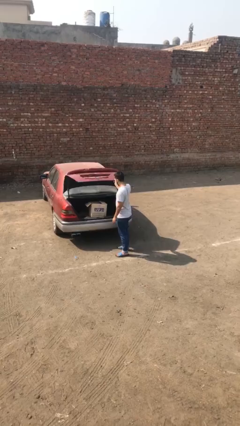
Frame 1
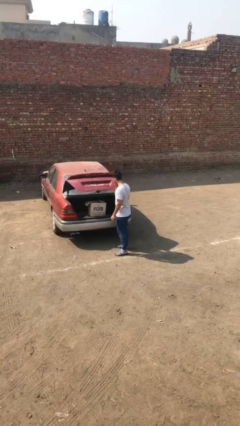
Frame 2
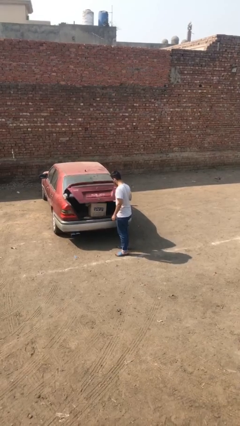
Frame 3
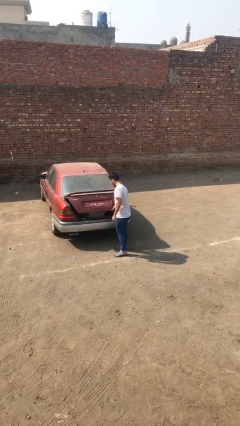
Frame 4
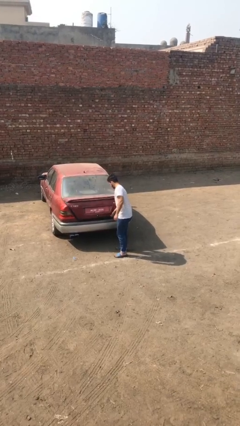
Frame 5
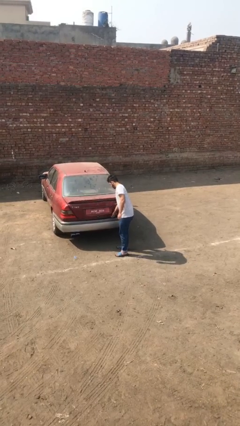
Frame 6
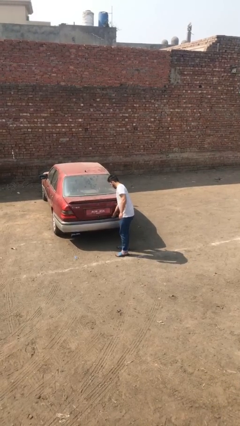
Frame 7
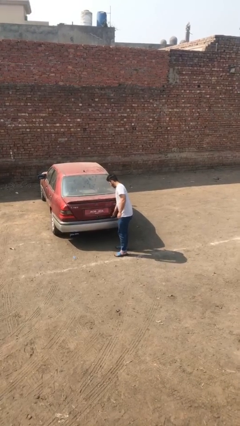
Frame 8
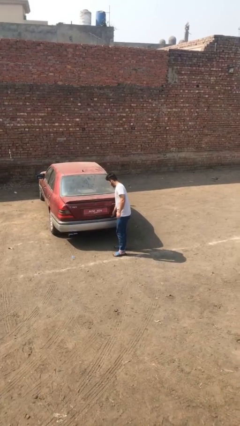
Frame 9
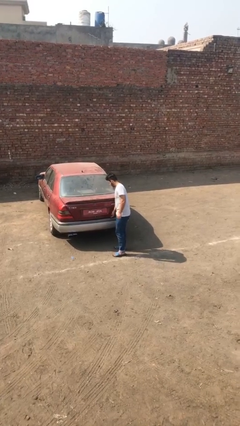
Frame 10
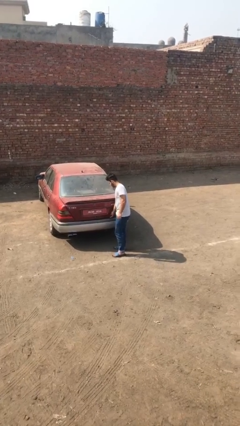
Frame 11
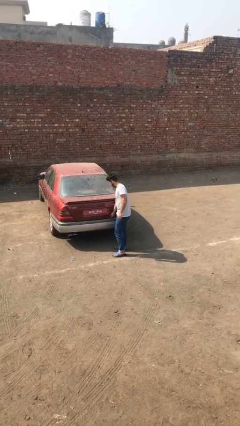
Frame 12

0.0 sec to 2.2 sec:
person closes car trunk

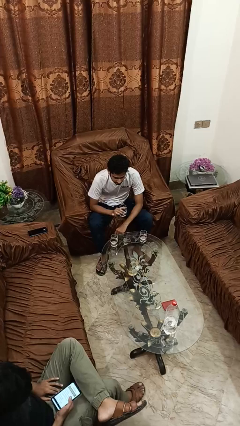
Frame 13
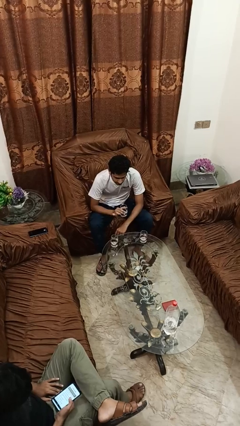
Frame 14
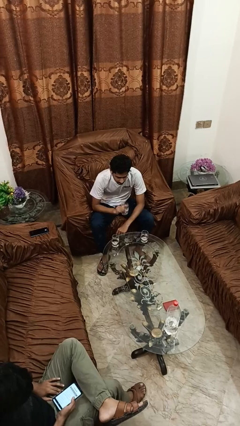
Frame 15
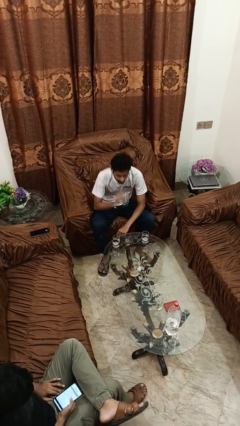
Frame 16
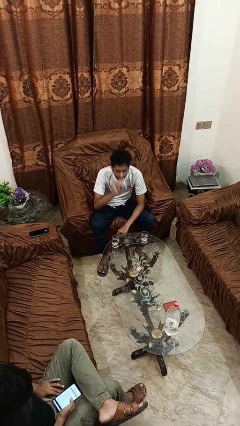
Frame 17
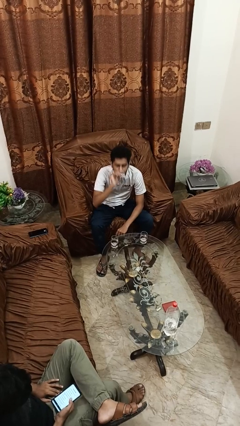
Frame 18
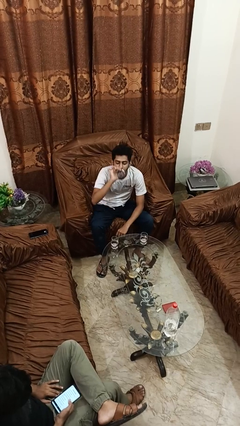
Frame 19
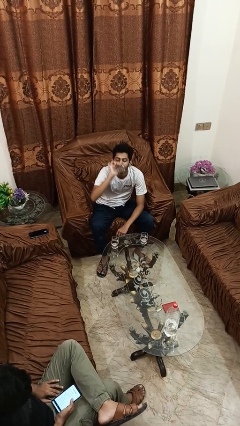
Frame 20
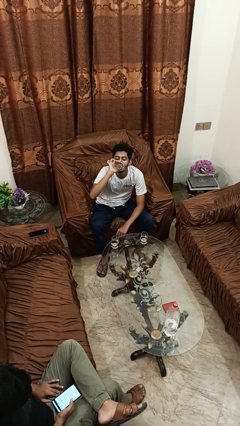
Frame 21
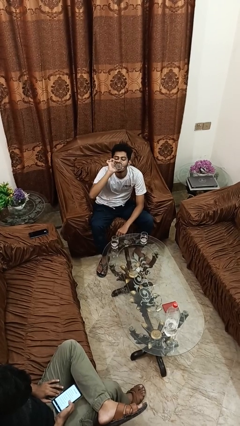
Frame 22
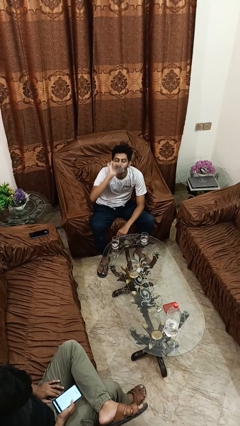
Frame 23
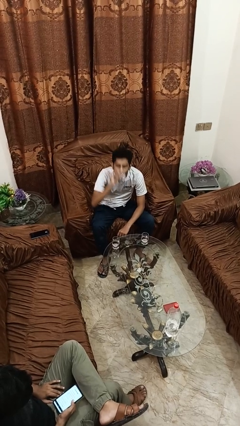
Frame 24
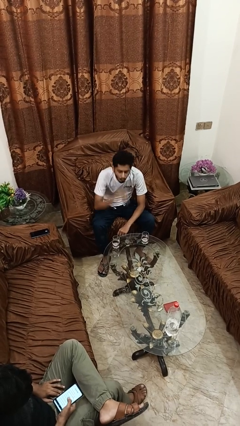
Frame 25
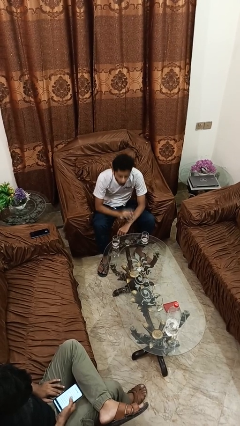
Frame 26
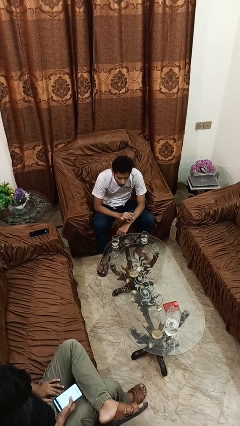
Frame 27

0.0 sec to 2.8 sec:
person drinks from shotglass

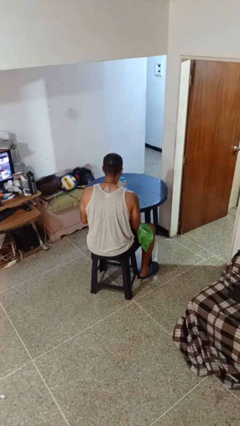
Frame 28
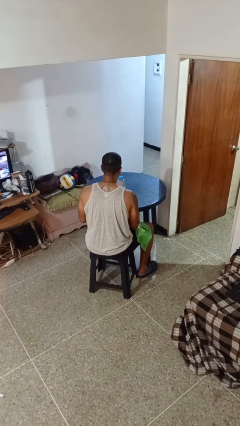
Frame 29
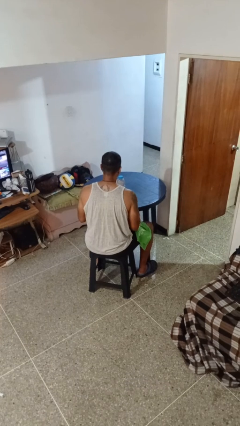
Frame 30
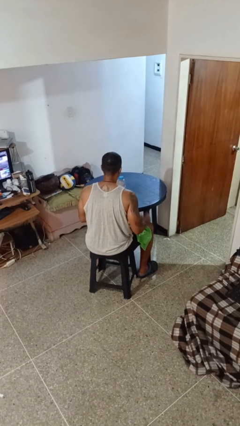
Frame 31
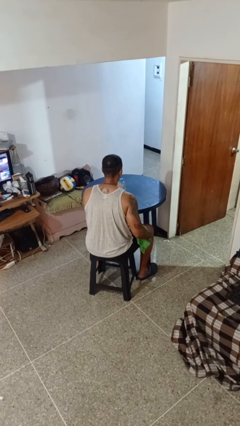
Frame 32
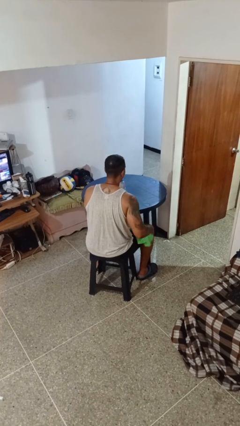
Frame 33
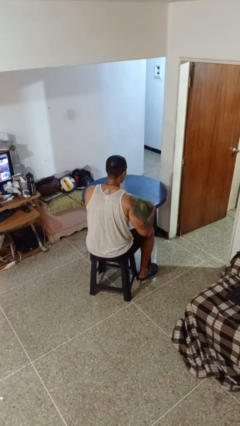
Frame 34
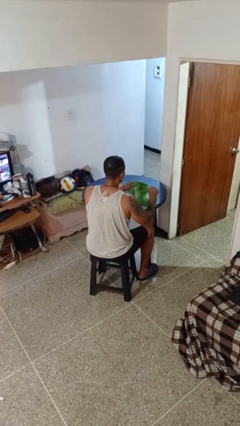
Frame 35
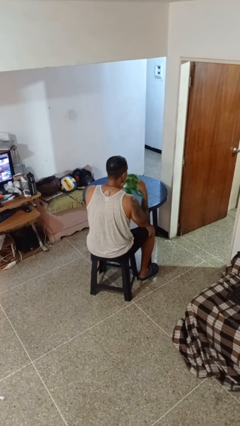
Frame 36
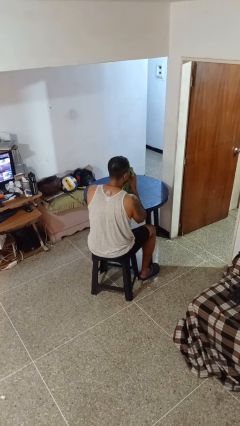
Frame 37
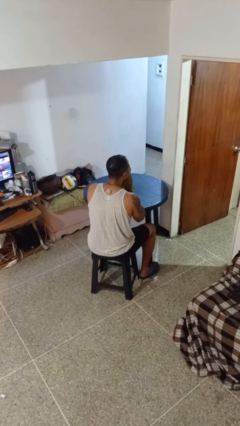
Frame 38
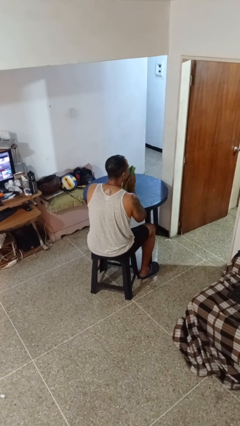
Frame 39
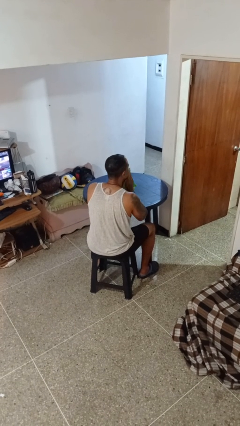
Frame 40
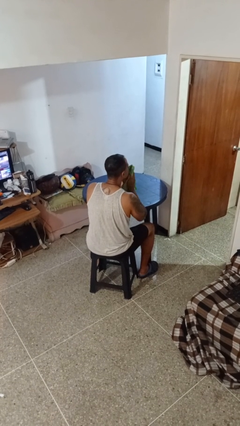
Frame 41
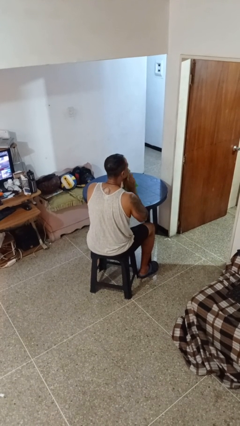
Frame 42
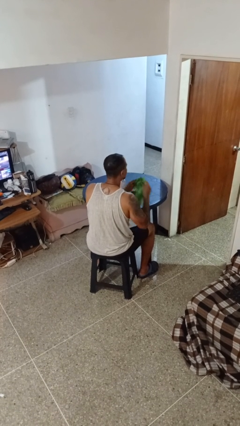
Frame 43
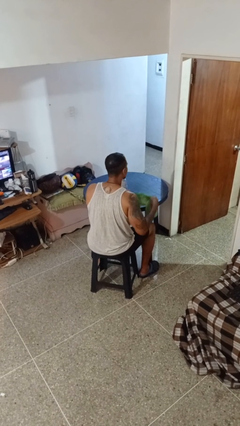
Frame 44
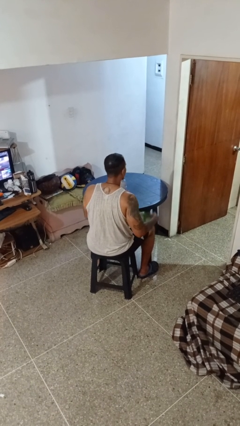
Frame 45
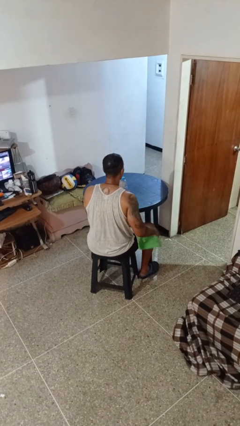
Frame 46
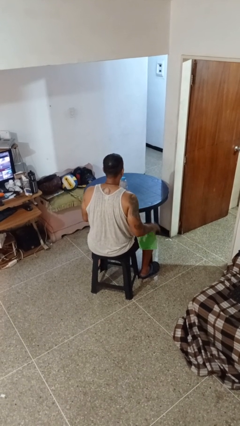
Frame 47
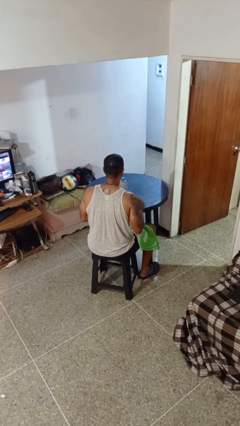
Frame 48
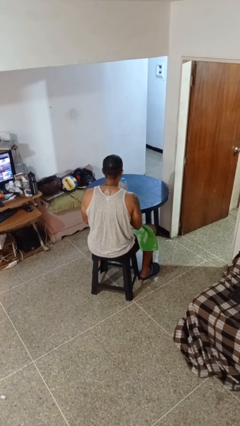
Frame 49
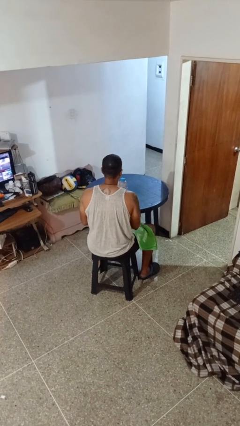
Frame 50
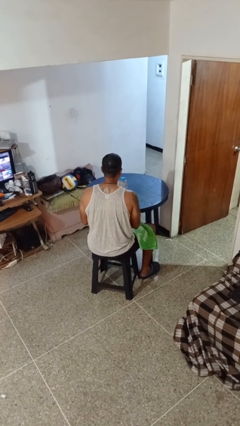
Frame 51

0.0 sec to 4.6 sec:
person wipes mouth with napkin

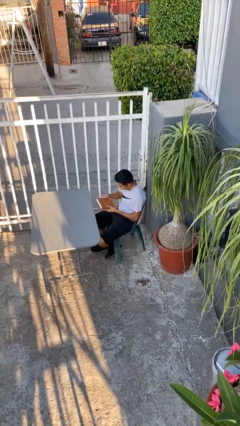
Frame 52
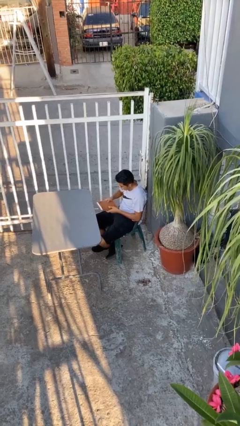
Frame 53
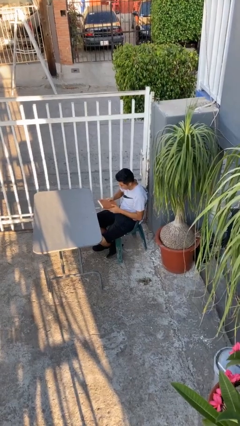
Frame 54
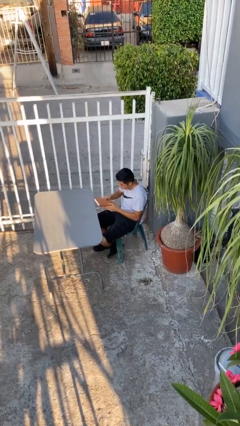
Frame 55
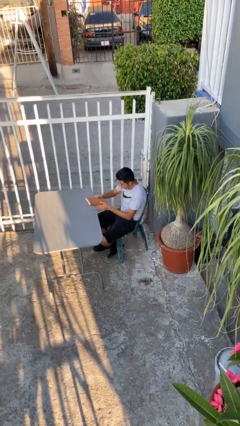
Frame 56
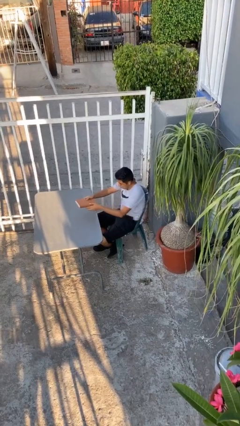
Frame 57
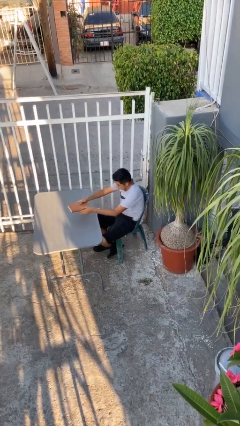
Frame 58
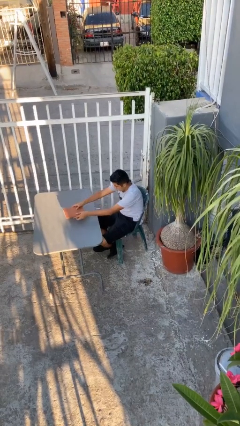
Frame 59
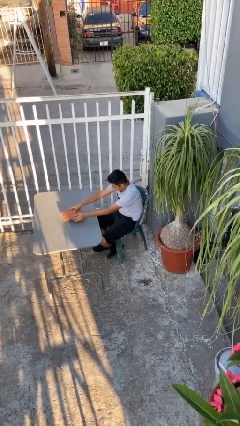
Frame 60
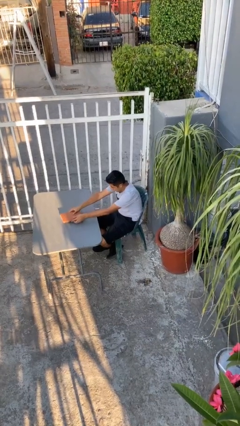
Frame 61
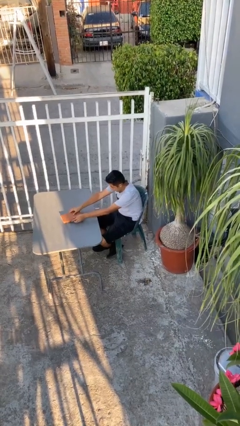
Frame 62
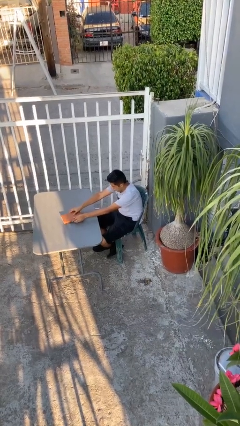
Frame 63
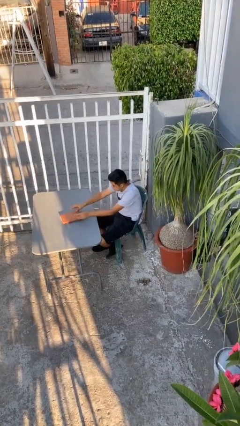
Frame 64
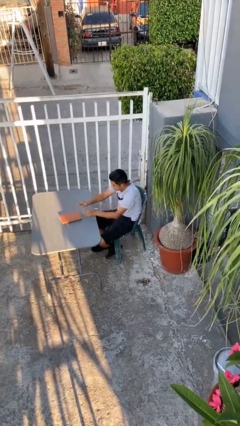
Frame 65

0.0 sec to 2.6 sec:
person puts down object on table

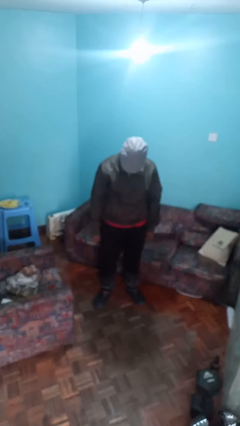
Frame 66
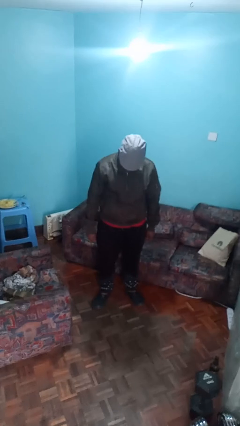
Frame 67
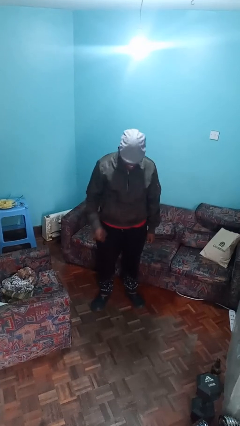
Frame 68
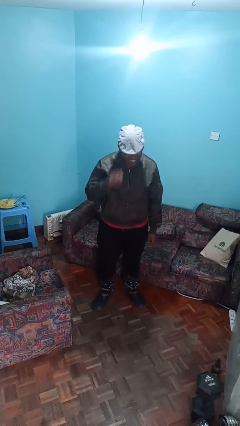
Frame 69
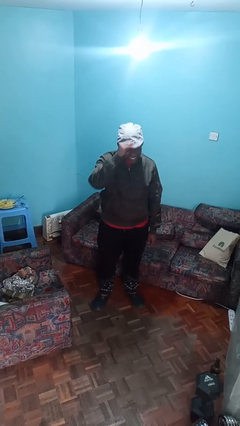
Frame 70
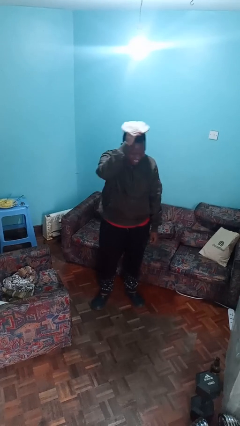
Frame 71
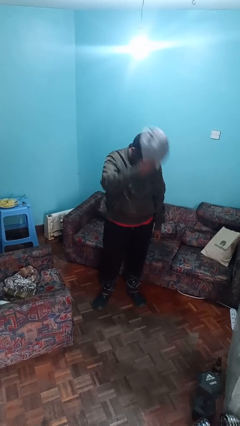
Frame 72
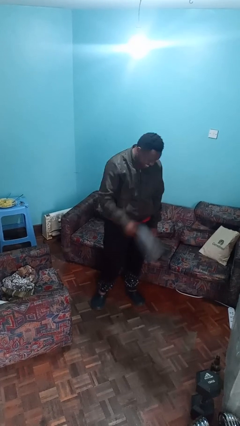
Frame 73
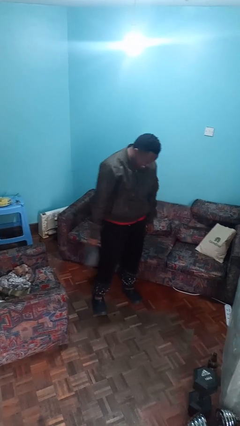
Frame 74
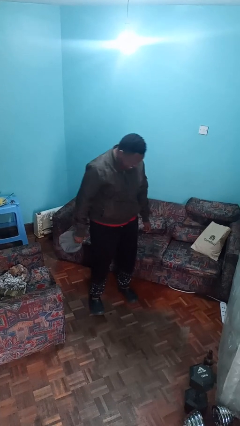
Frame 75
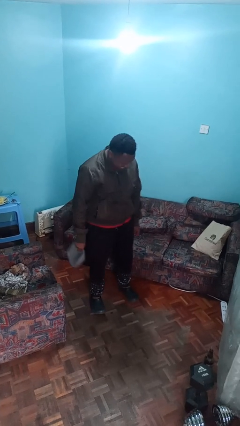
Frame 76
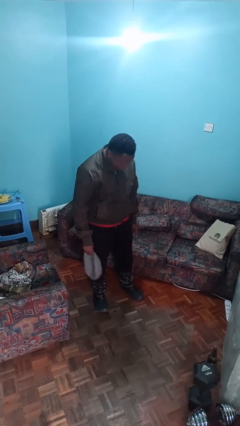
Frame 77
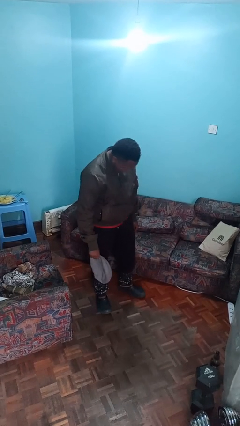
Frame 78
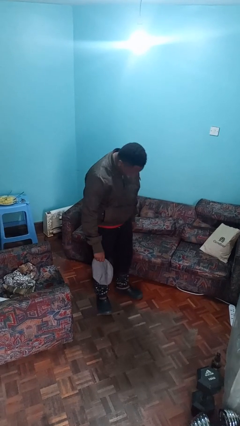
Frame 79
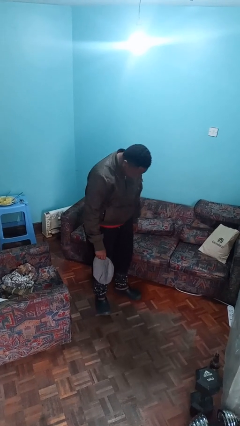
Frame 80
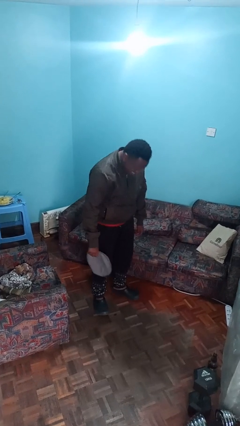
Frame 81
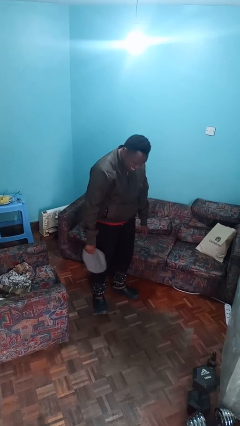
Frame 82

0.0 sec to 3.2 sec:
person takes off hat

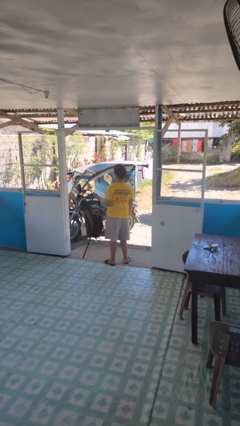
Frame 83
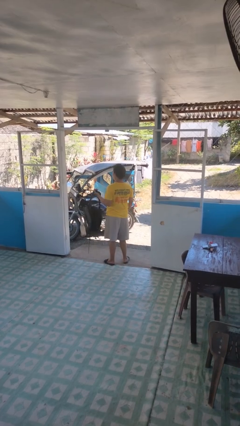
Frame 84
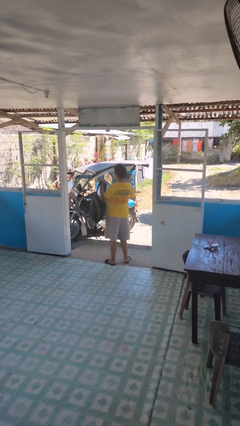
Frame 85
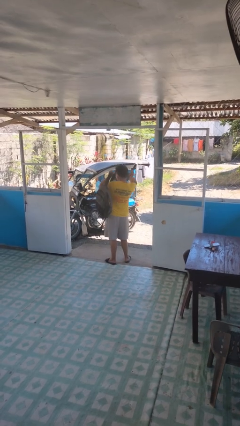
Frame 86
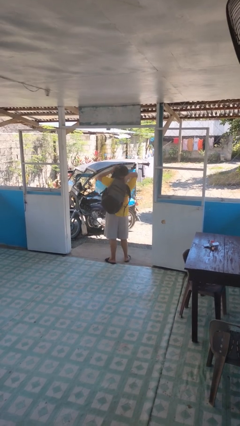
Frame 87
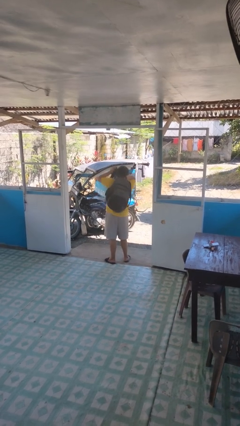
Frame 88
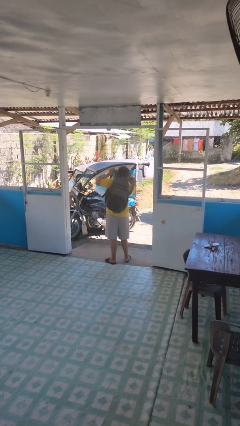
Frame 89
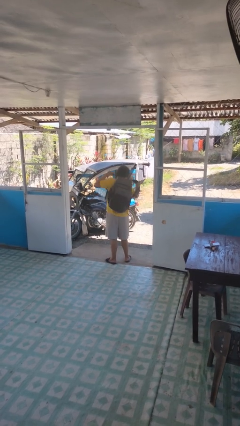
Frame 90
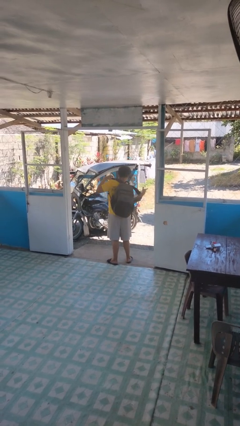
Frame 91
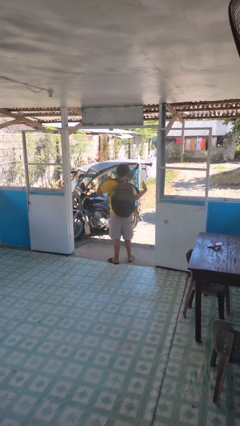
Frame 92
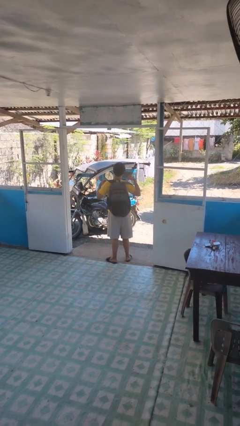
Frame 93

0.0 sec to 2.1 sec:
person puts on backpack
